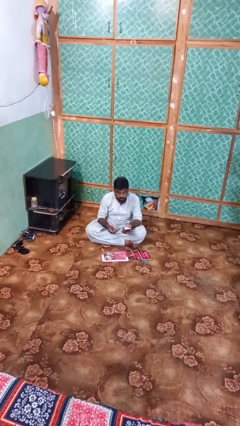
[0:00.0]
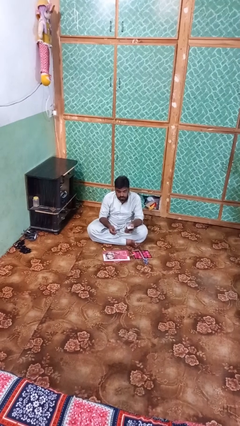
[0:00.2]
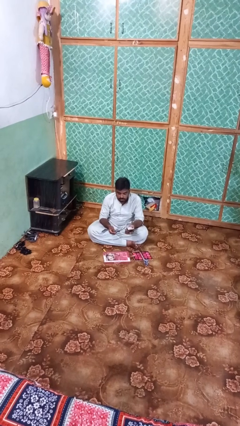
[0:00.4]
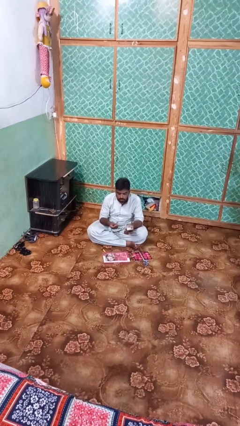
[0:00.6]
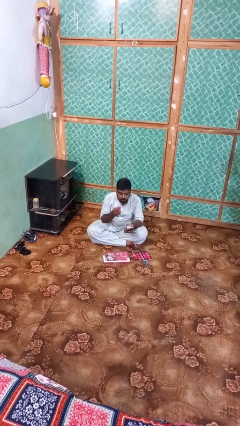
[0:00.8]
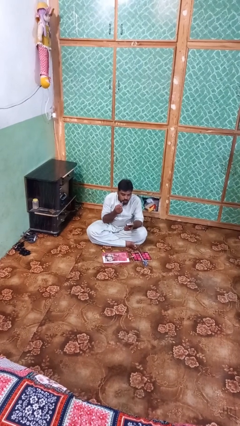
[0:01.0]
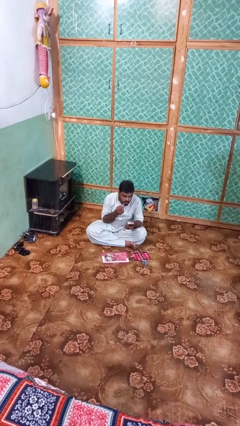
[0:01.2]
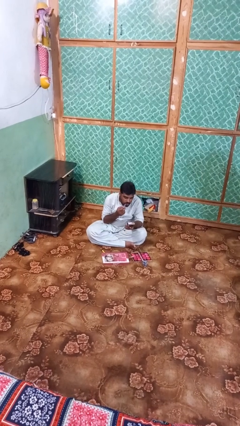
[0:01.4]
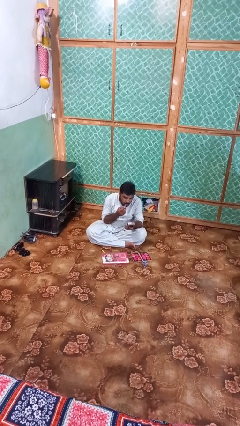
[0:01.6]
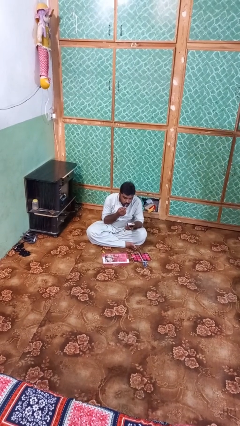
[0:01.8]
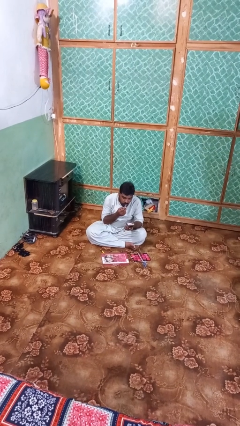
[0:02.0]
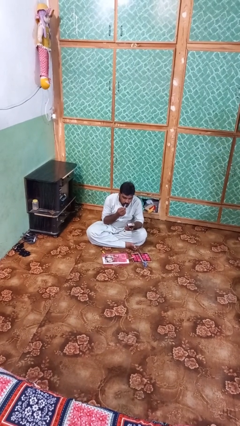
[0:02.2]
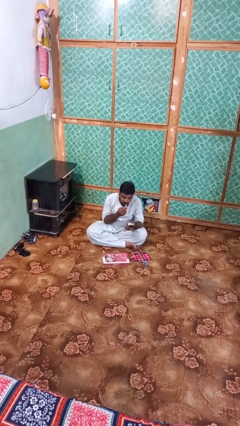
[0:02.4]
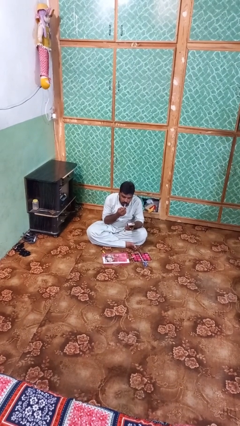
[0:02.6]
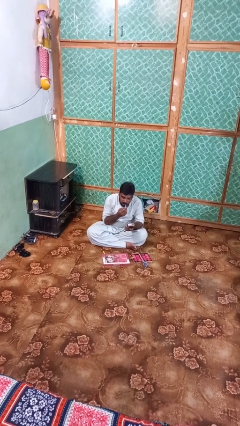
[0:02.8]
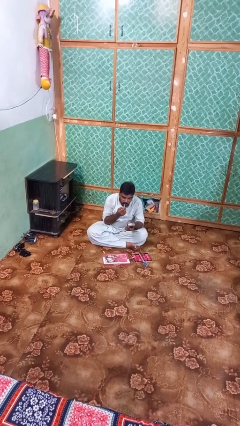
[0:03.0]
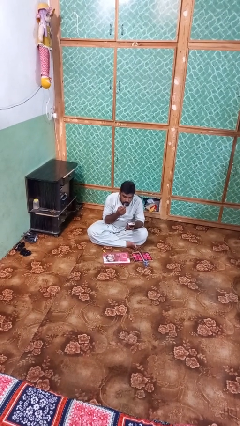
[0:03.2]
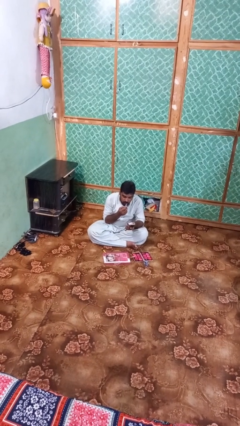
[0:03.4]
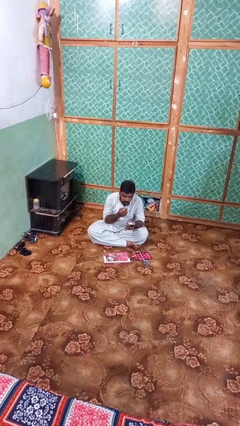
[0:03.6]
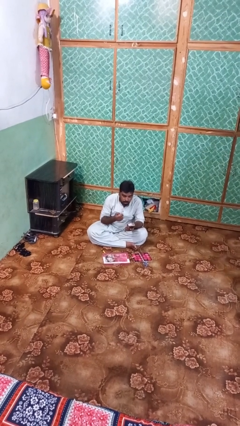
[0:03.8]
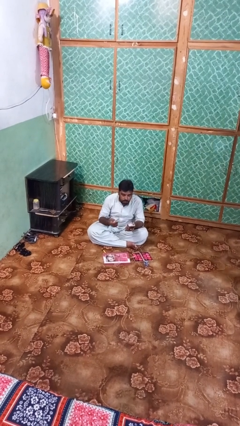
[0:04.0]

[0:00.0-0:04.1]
person applies lip makeup

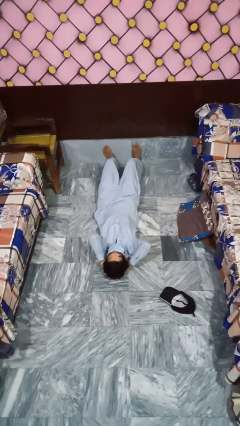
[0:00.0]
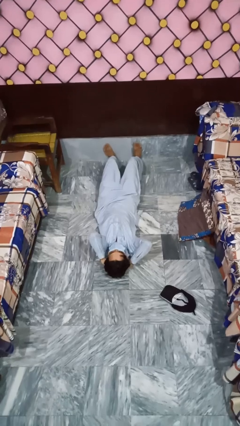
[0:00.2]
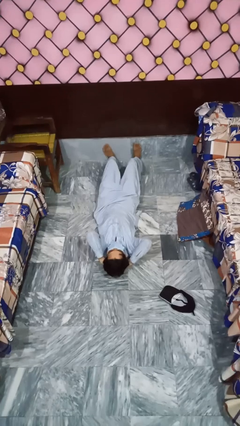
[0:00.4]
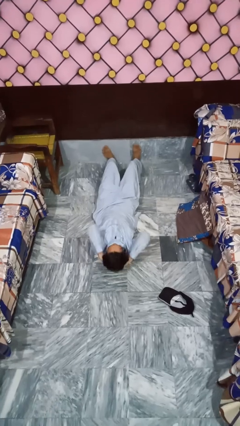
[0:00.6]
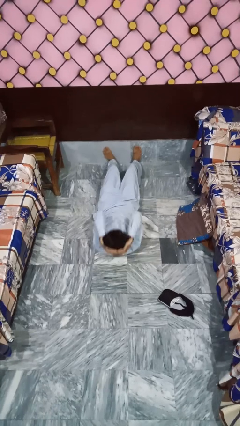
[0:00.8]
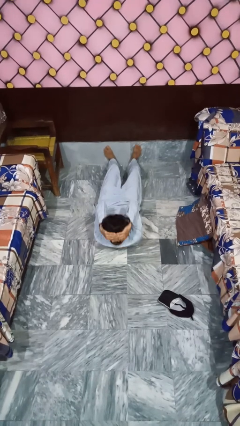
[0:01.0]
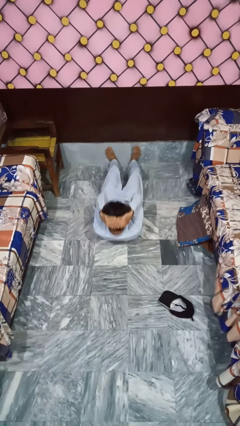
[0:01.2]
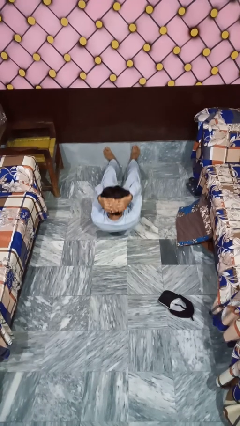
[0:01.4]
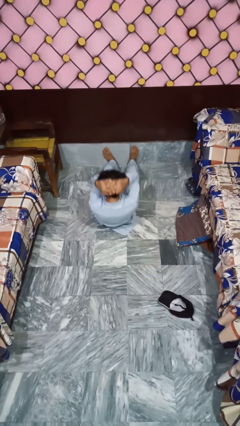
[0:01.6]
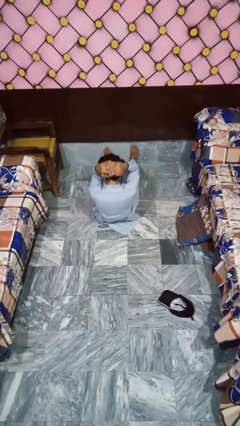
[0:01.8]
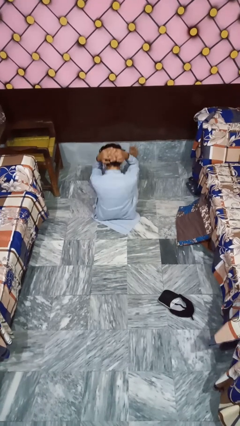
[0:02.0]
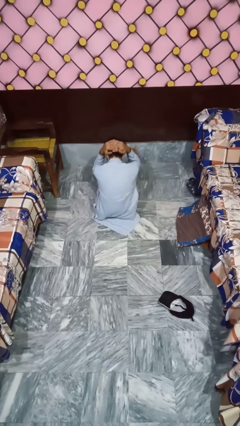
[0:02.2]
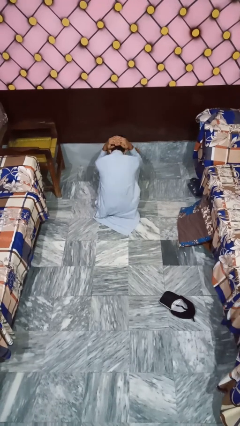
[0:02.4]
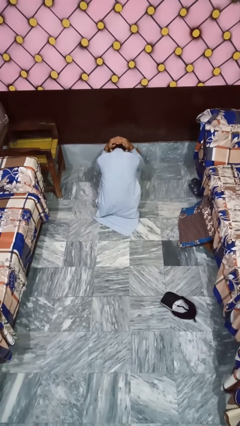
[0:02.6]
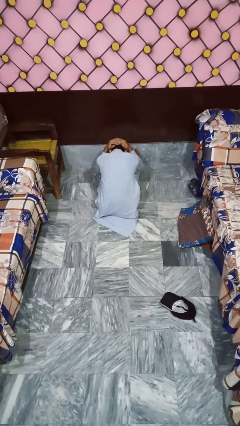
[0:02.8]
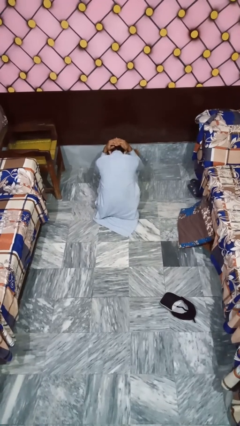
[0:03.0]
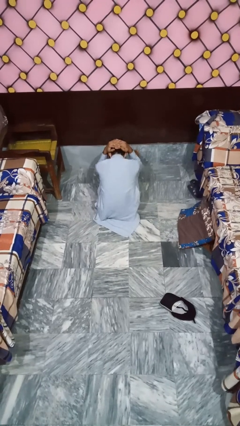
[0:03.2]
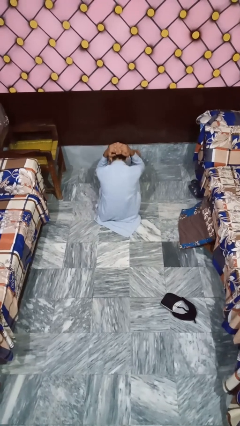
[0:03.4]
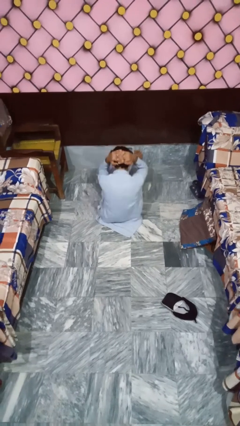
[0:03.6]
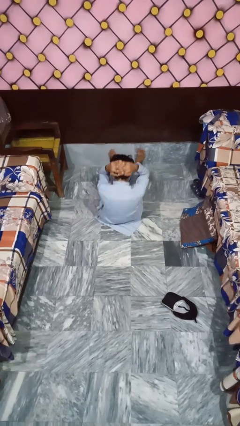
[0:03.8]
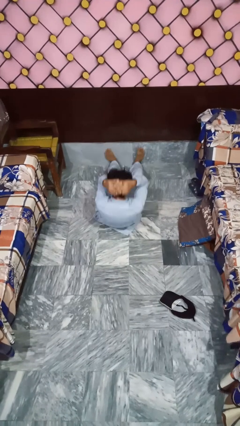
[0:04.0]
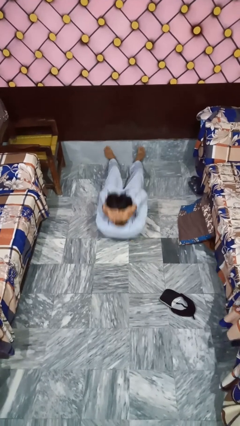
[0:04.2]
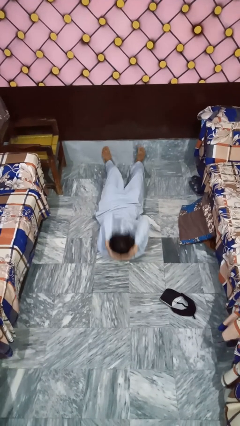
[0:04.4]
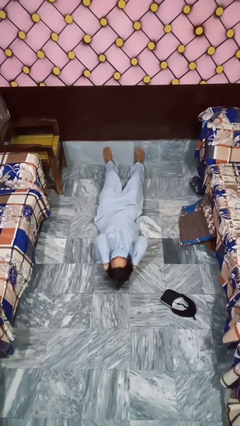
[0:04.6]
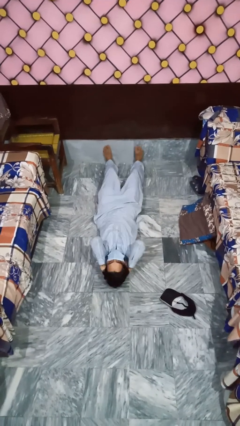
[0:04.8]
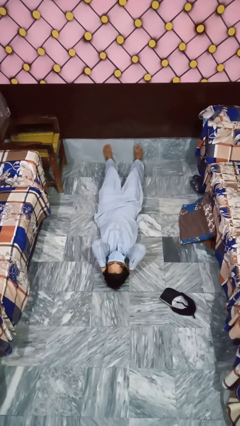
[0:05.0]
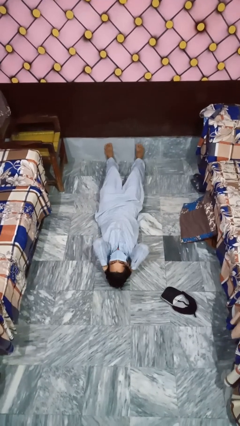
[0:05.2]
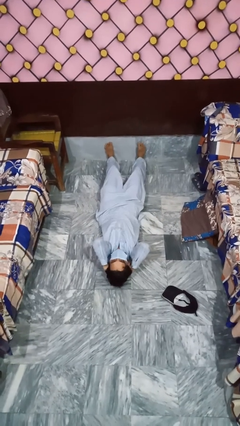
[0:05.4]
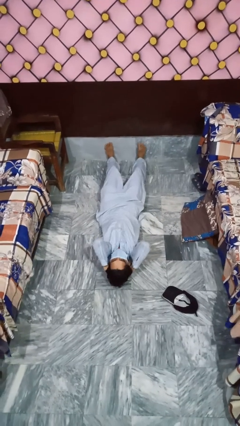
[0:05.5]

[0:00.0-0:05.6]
person exercises with situp

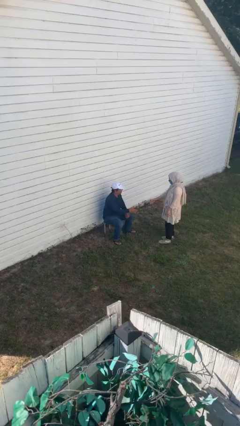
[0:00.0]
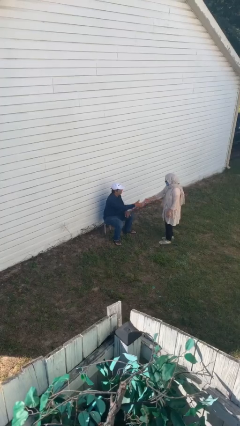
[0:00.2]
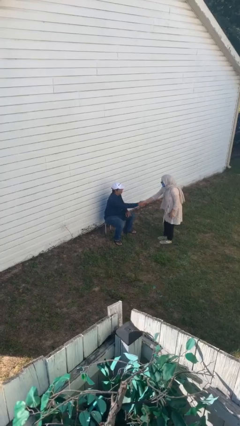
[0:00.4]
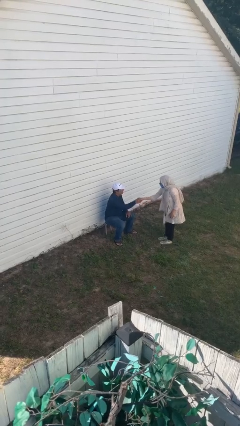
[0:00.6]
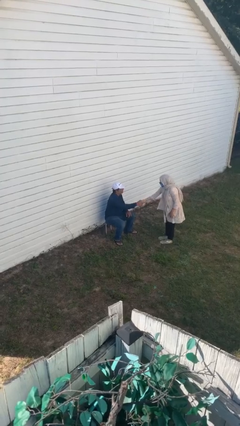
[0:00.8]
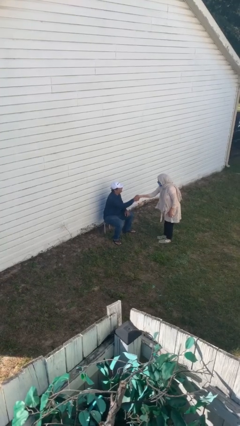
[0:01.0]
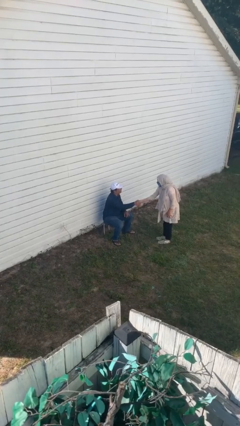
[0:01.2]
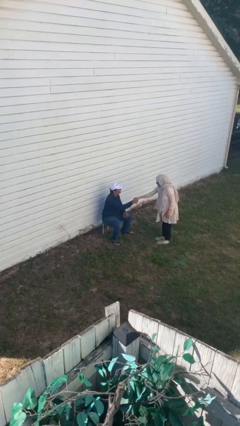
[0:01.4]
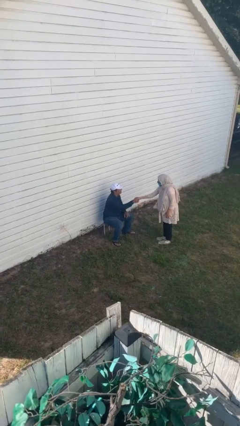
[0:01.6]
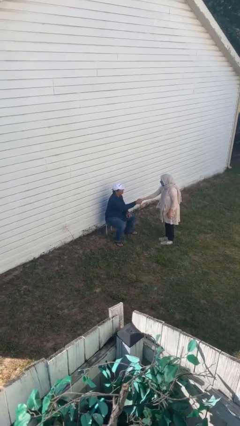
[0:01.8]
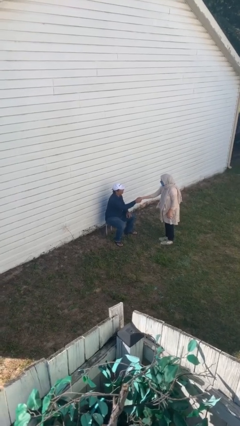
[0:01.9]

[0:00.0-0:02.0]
person shakes hand

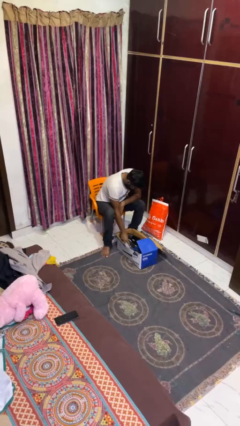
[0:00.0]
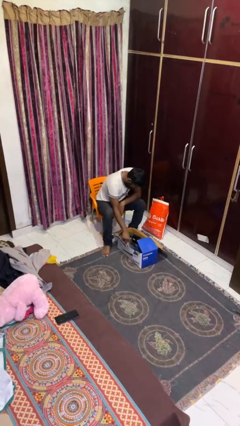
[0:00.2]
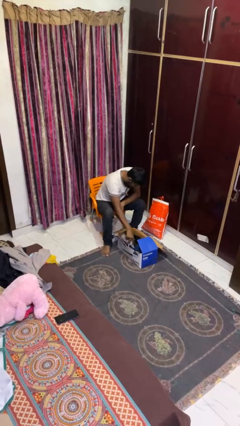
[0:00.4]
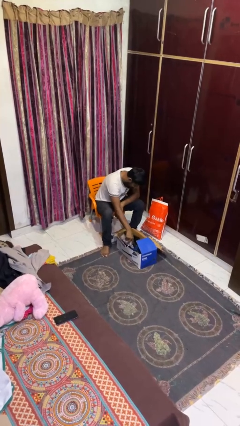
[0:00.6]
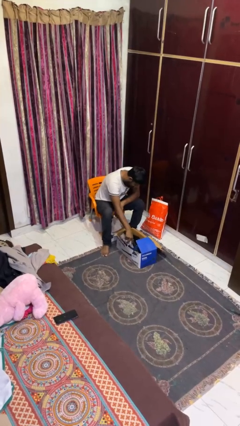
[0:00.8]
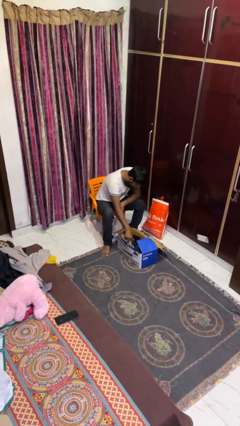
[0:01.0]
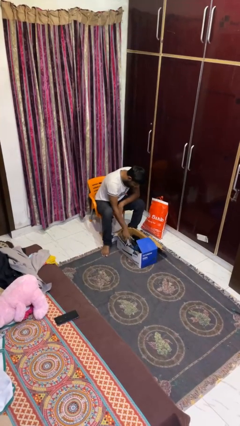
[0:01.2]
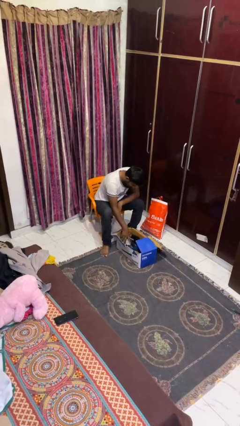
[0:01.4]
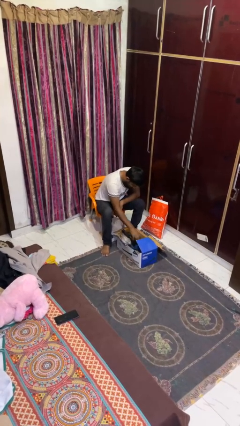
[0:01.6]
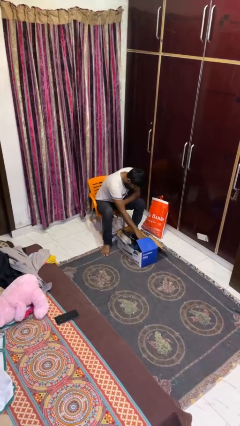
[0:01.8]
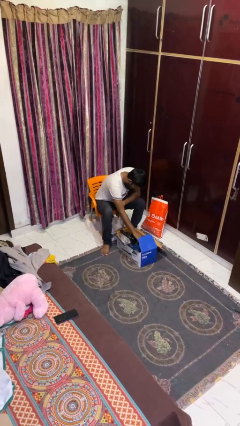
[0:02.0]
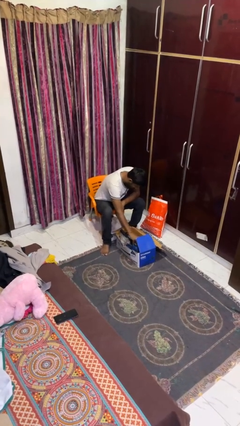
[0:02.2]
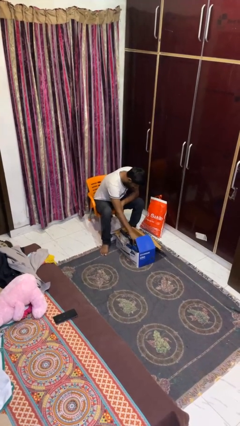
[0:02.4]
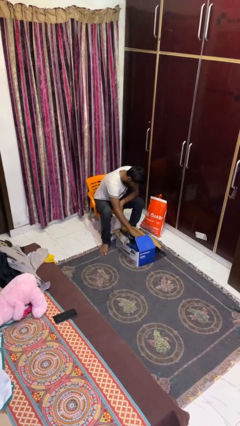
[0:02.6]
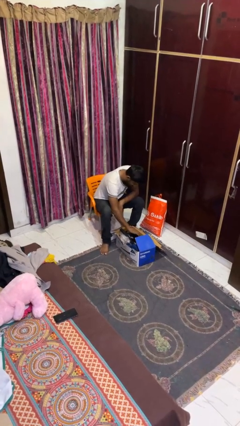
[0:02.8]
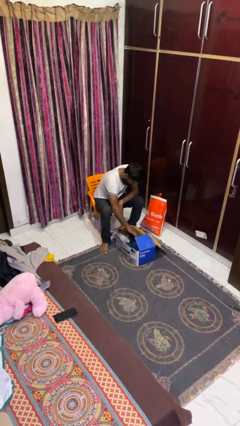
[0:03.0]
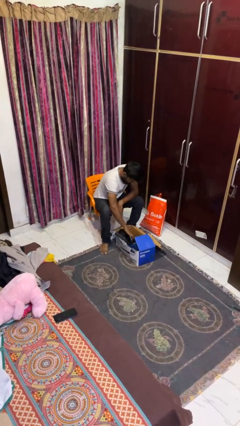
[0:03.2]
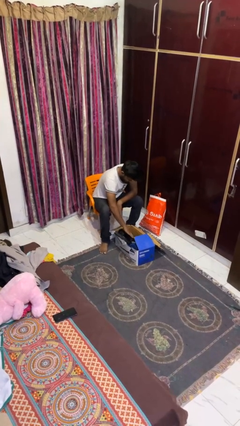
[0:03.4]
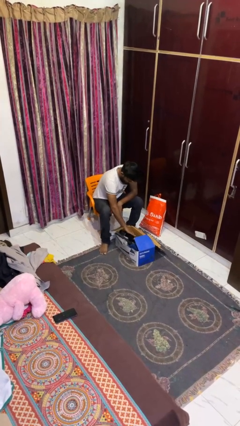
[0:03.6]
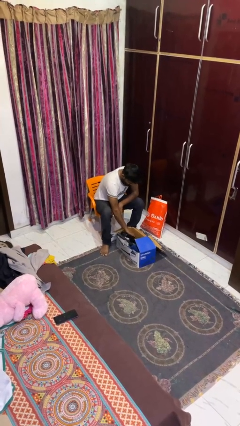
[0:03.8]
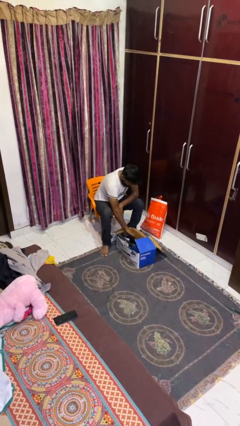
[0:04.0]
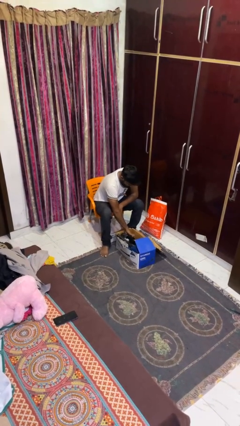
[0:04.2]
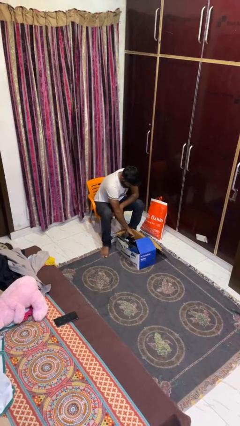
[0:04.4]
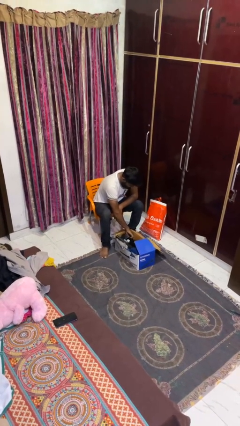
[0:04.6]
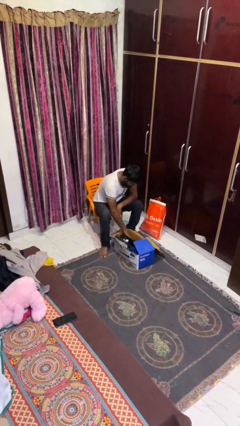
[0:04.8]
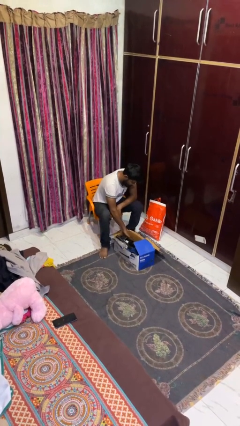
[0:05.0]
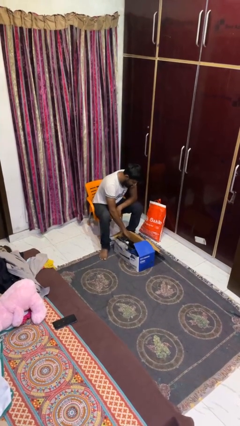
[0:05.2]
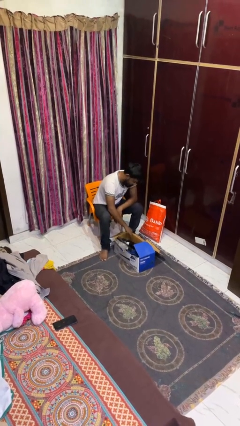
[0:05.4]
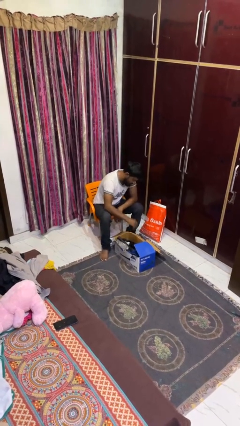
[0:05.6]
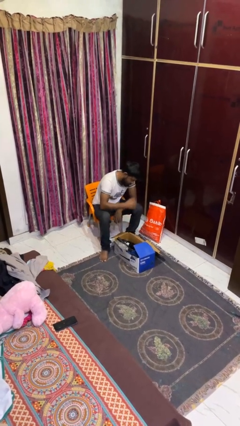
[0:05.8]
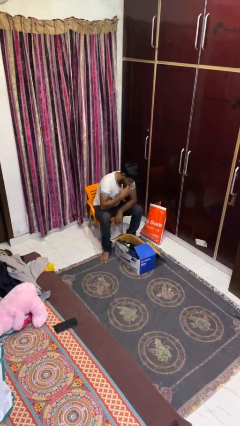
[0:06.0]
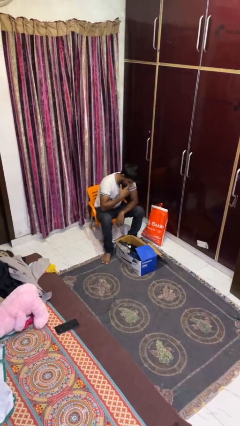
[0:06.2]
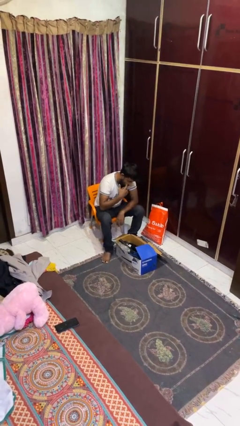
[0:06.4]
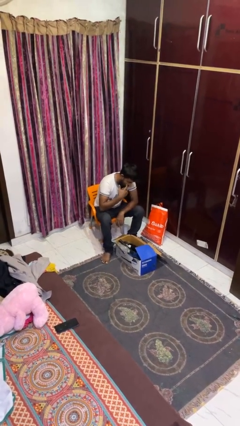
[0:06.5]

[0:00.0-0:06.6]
person searches in box

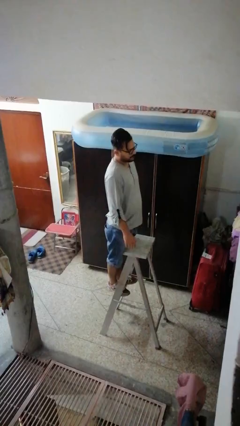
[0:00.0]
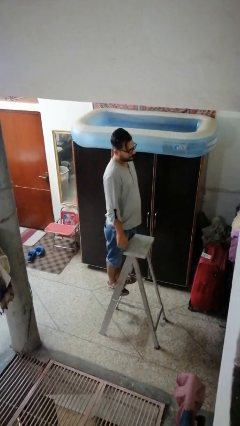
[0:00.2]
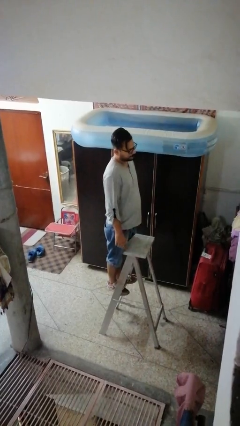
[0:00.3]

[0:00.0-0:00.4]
person climbs down ladder
